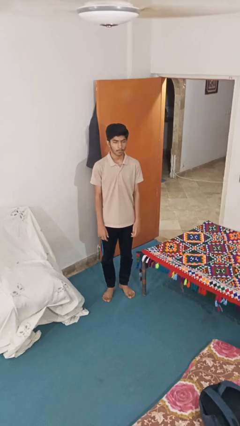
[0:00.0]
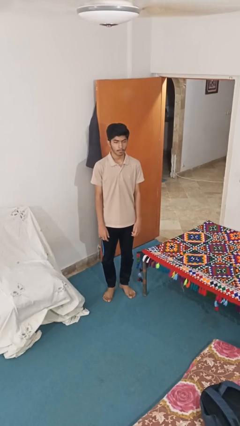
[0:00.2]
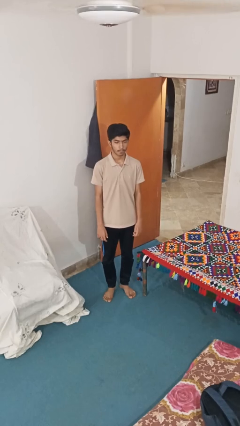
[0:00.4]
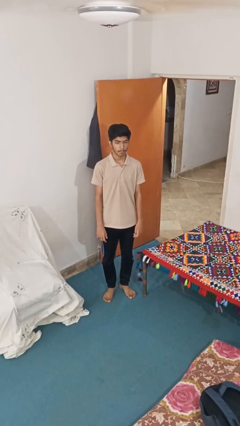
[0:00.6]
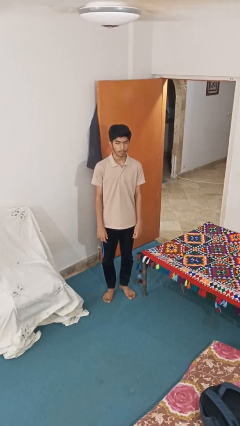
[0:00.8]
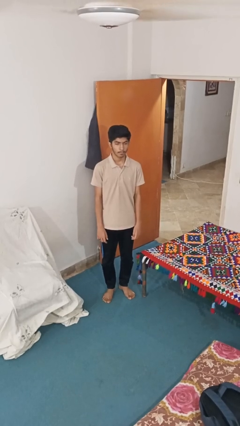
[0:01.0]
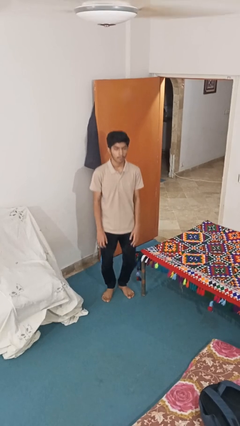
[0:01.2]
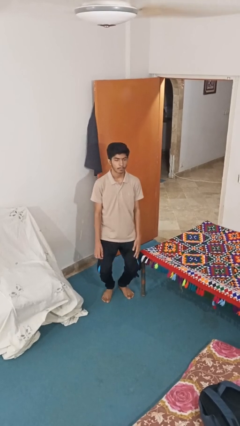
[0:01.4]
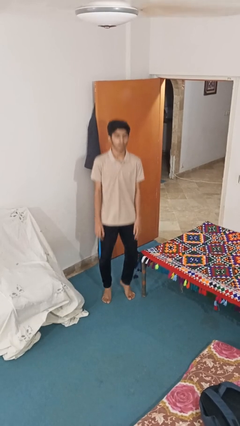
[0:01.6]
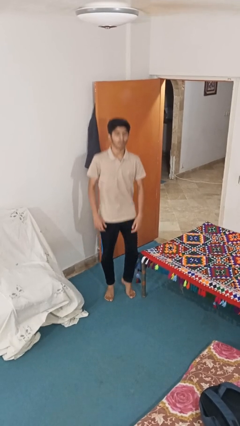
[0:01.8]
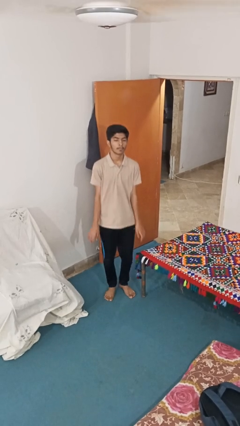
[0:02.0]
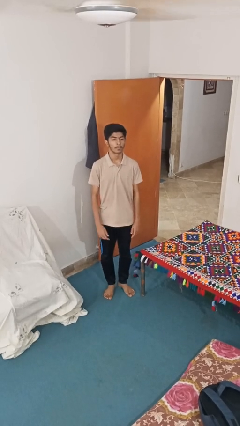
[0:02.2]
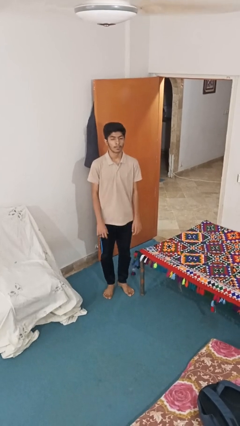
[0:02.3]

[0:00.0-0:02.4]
person jumps

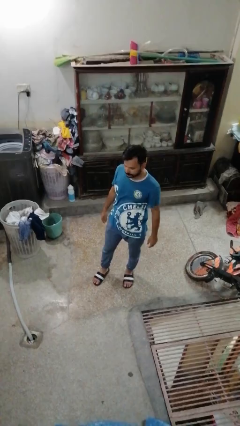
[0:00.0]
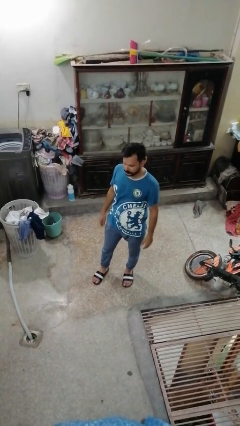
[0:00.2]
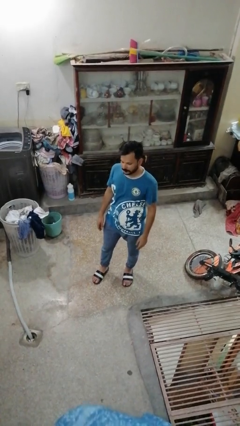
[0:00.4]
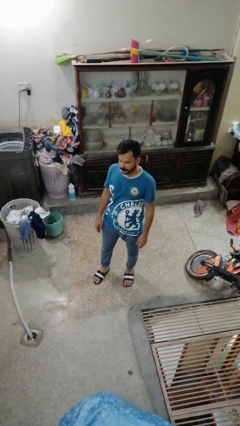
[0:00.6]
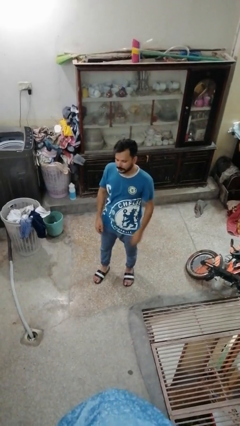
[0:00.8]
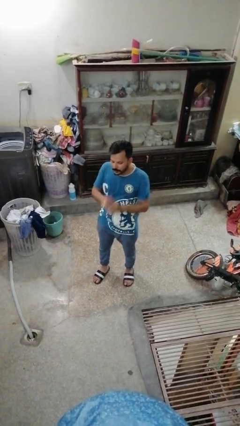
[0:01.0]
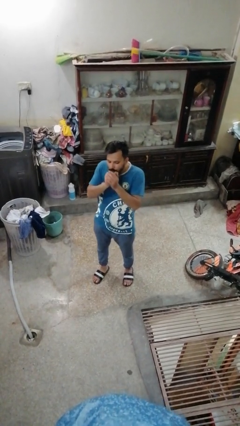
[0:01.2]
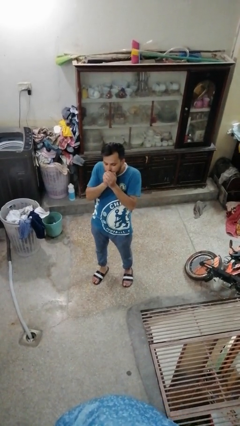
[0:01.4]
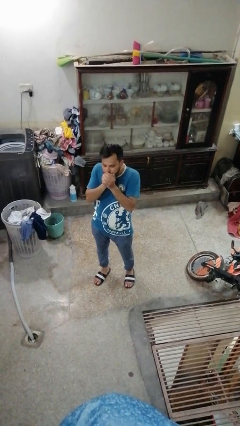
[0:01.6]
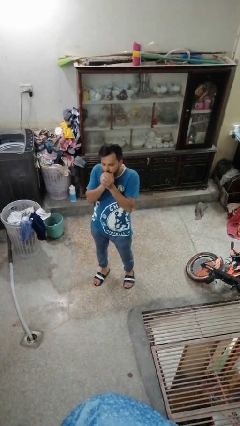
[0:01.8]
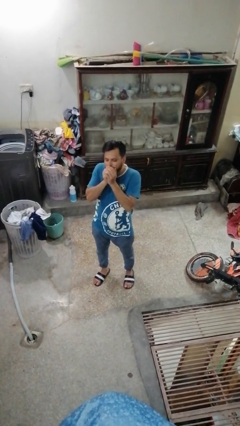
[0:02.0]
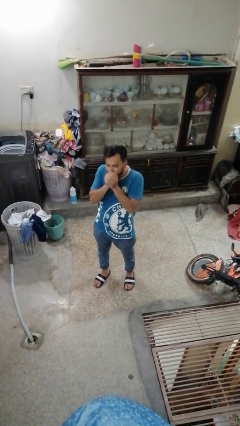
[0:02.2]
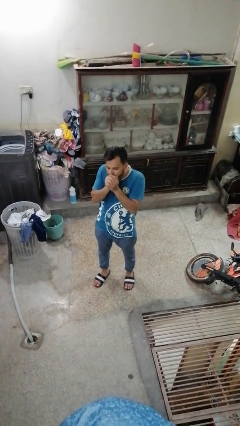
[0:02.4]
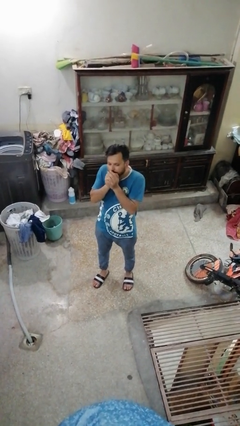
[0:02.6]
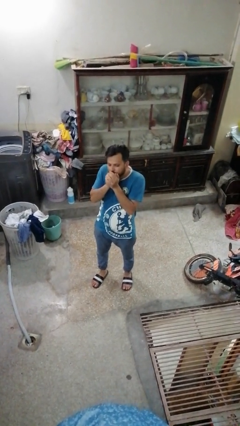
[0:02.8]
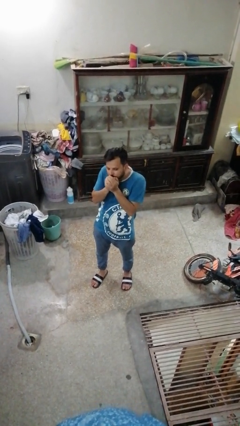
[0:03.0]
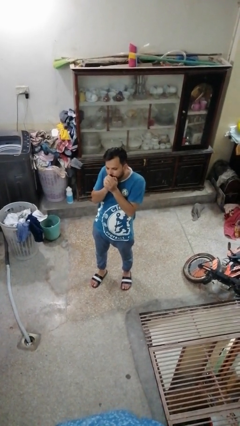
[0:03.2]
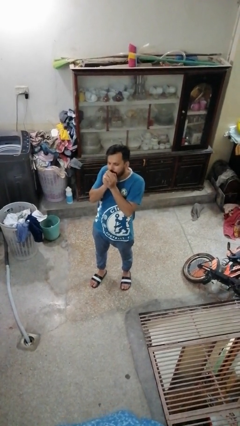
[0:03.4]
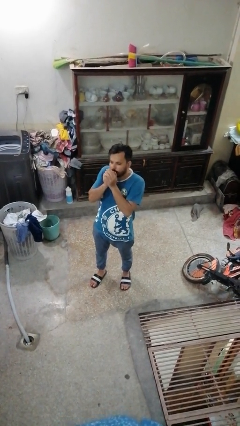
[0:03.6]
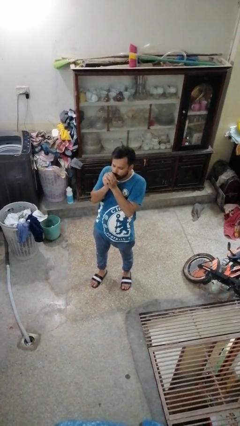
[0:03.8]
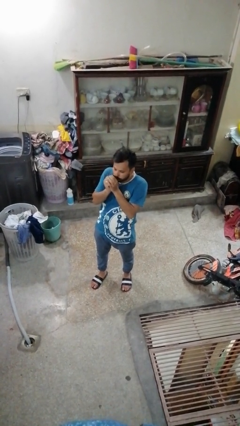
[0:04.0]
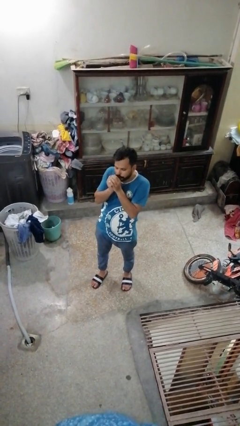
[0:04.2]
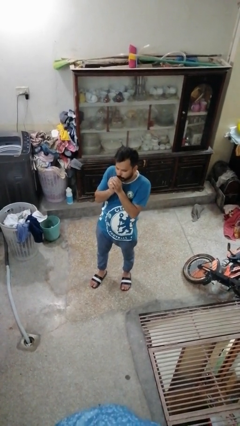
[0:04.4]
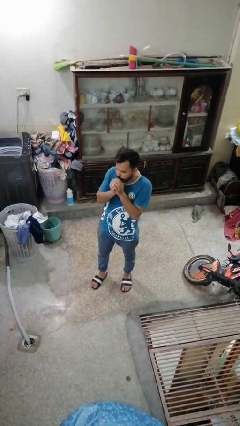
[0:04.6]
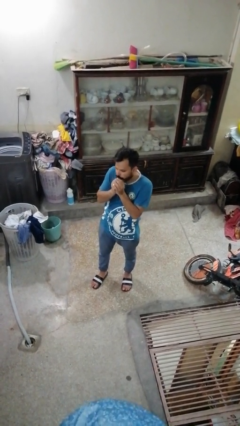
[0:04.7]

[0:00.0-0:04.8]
person blows into hands

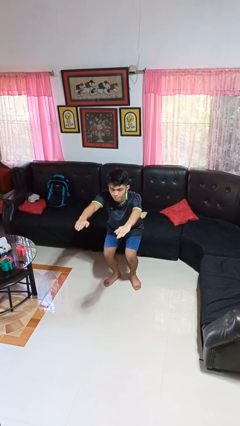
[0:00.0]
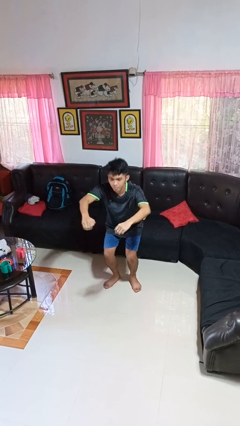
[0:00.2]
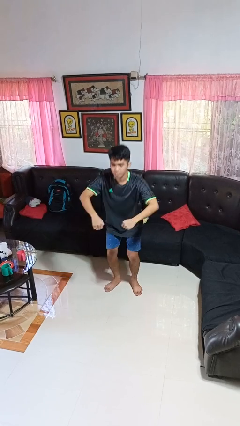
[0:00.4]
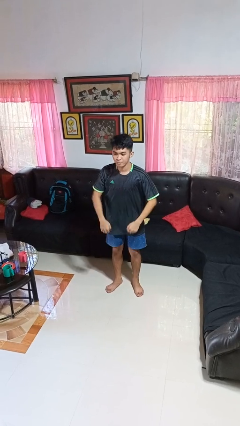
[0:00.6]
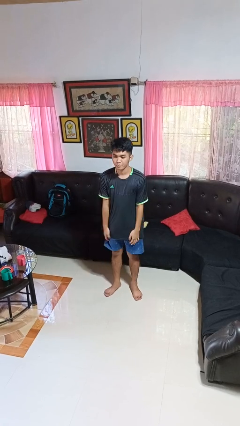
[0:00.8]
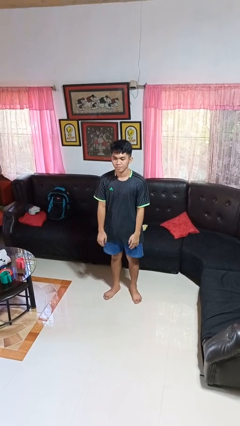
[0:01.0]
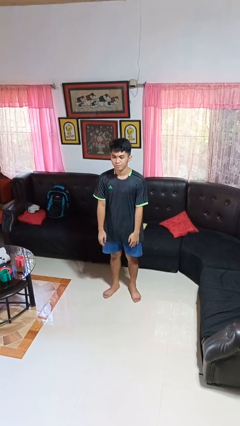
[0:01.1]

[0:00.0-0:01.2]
person stands up

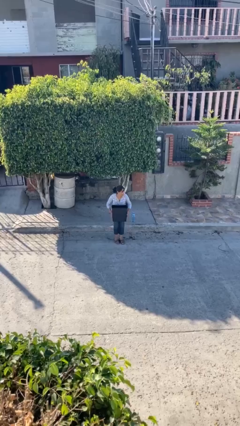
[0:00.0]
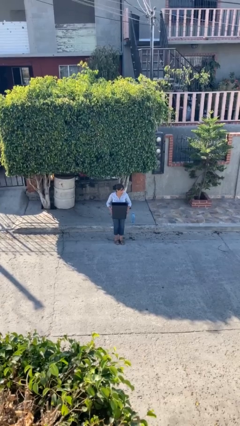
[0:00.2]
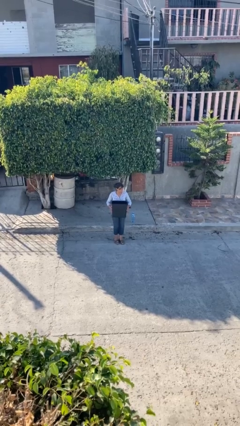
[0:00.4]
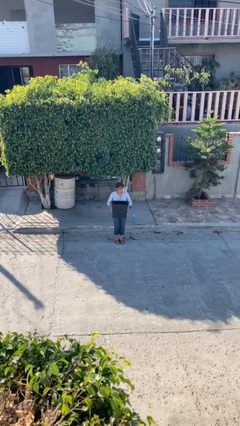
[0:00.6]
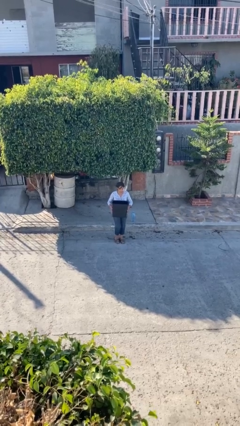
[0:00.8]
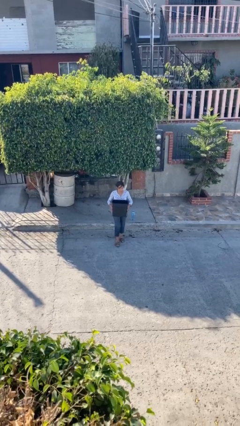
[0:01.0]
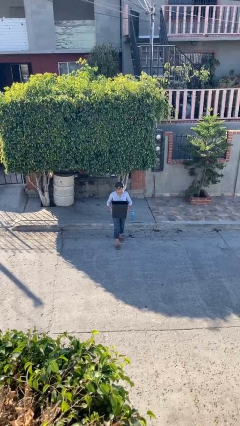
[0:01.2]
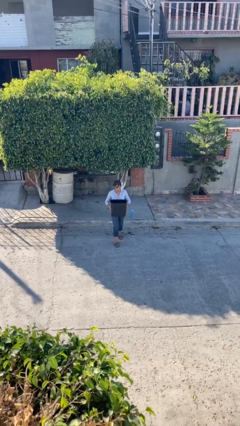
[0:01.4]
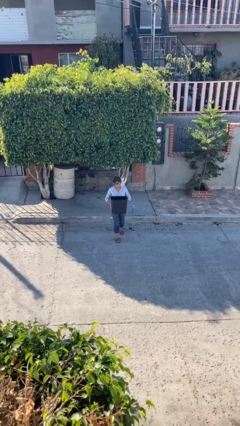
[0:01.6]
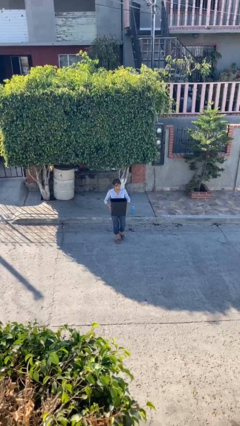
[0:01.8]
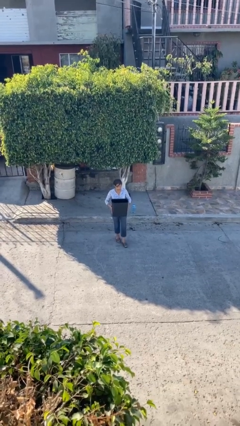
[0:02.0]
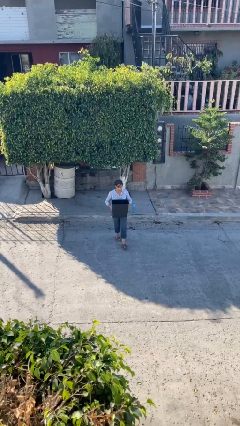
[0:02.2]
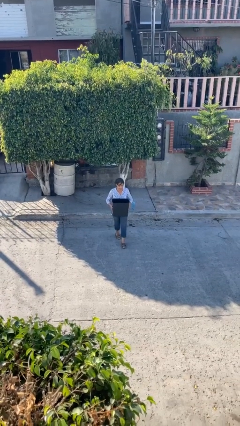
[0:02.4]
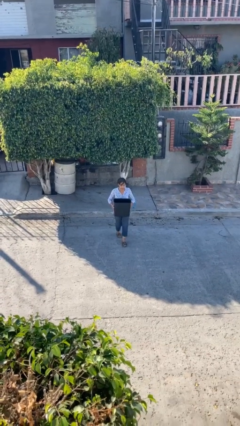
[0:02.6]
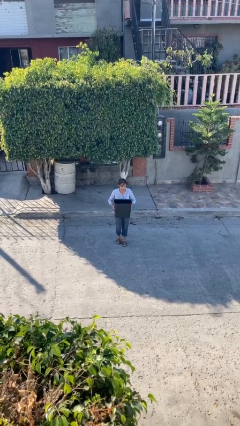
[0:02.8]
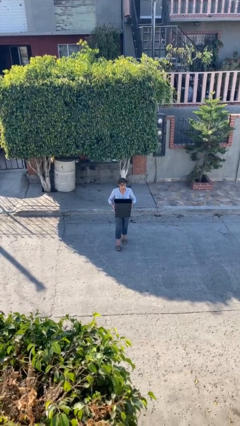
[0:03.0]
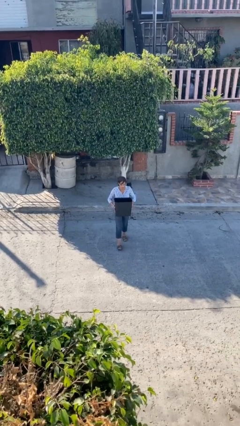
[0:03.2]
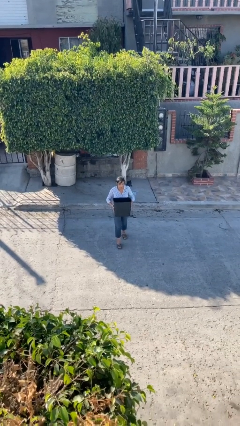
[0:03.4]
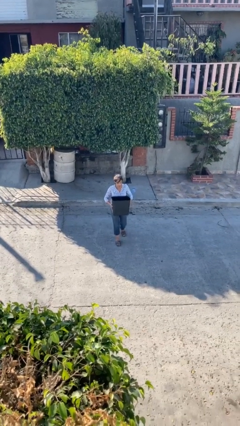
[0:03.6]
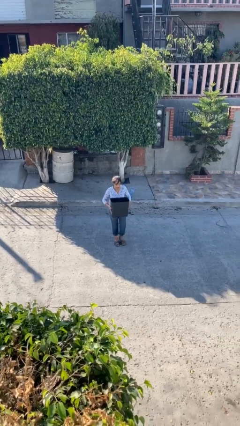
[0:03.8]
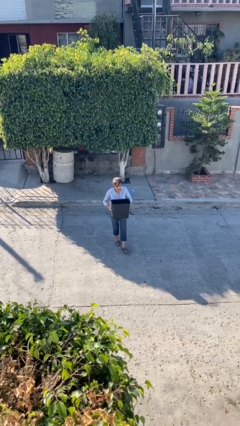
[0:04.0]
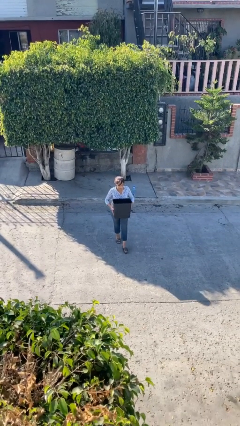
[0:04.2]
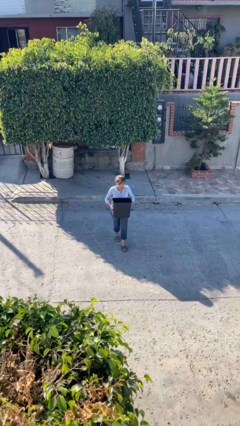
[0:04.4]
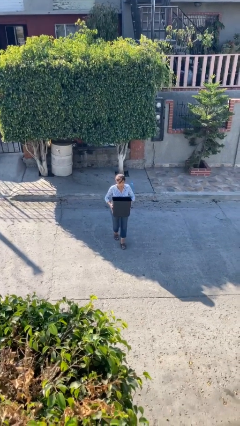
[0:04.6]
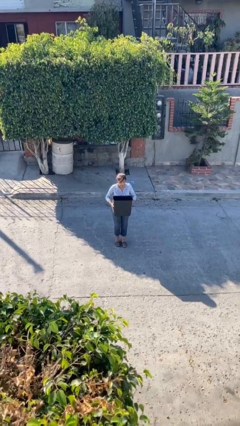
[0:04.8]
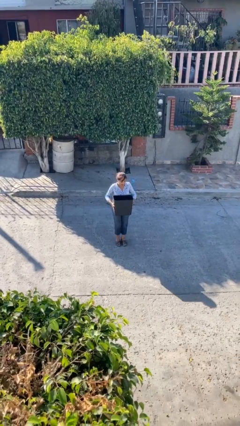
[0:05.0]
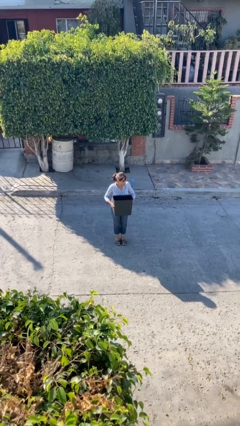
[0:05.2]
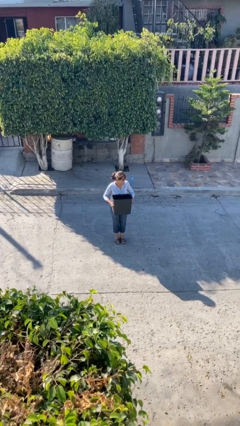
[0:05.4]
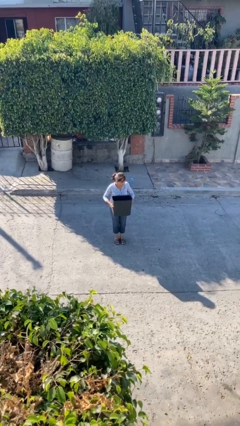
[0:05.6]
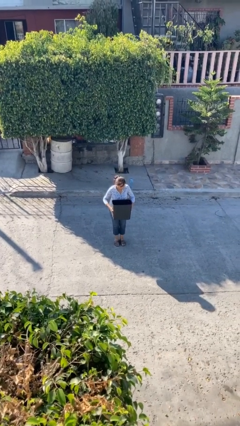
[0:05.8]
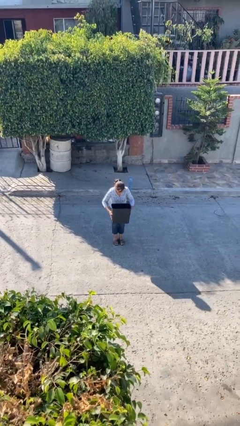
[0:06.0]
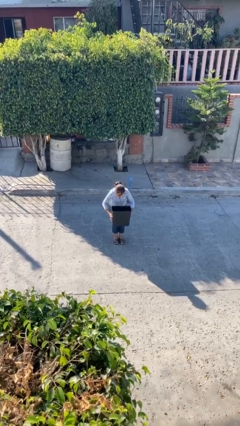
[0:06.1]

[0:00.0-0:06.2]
person carries heavy object

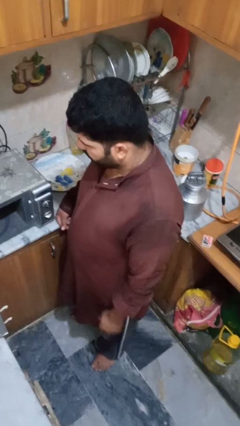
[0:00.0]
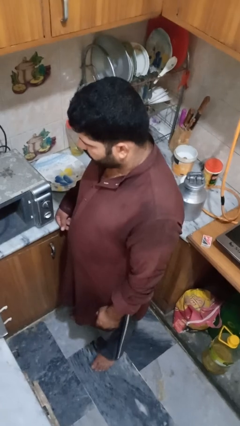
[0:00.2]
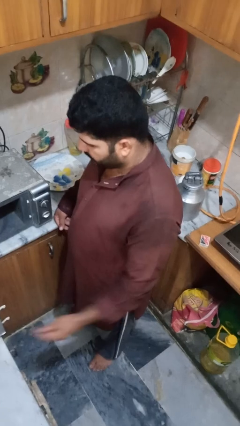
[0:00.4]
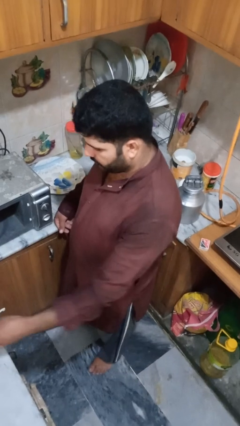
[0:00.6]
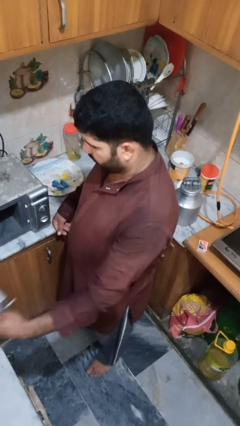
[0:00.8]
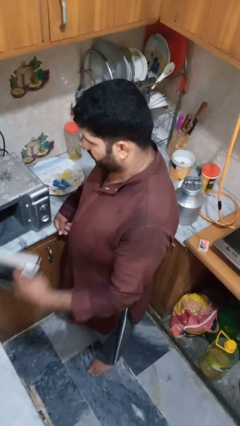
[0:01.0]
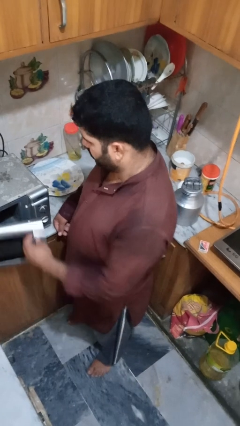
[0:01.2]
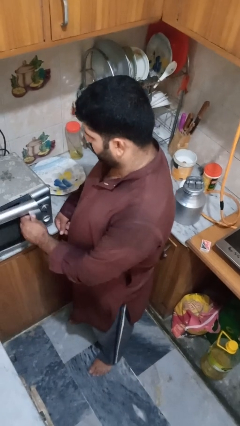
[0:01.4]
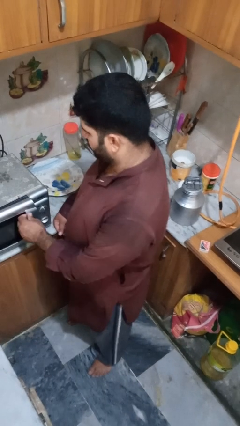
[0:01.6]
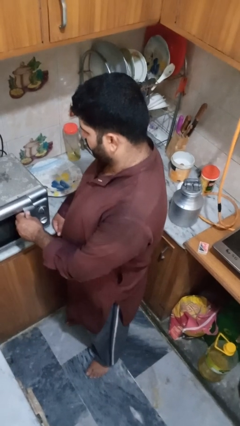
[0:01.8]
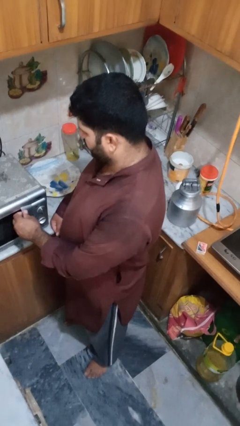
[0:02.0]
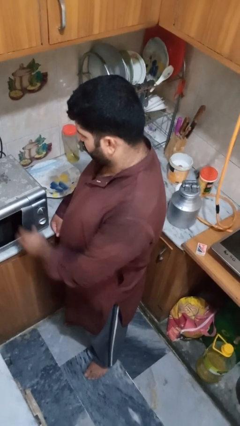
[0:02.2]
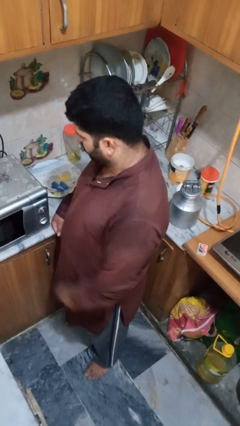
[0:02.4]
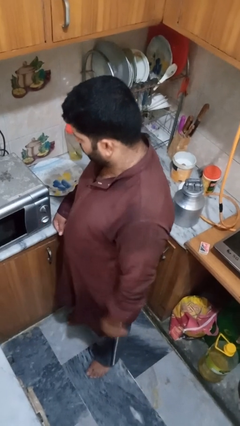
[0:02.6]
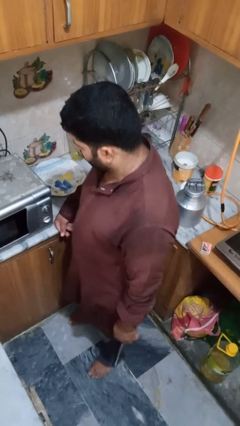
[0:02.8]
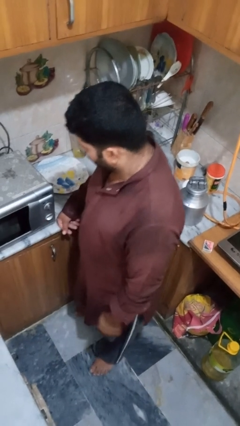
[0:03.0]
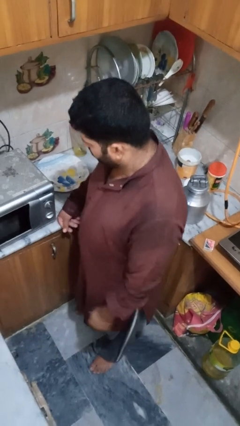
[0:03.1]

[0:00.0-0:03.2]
person closes oven door
